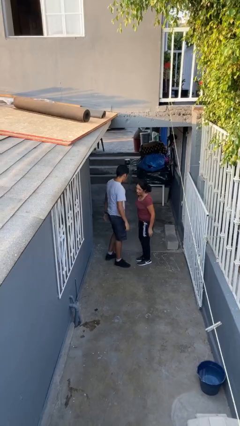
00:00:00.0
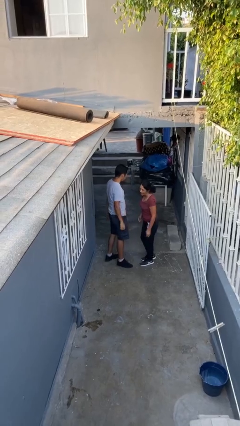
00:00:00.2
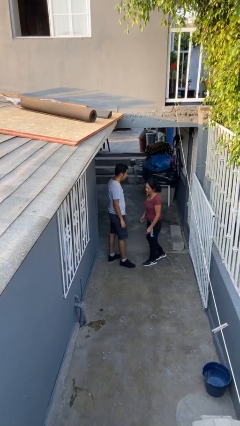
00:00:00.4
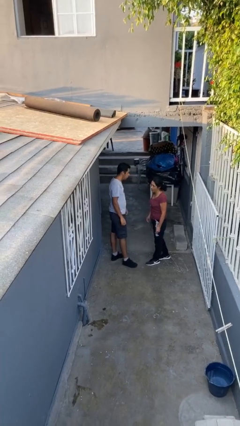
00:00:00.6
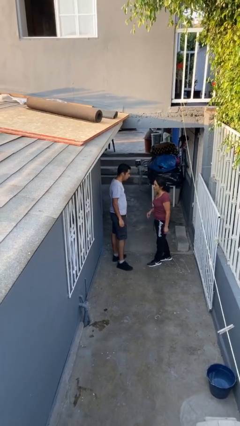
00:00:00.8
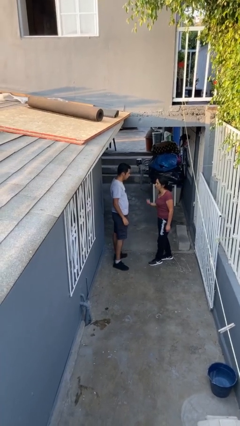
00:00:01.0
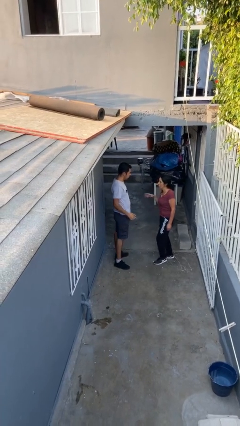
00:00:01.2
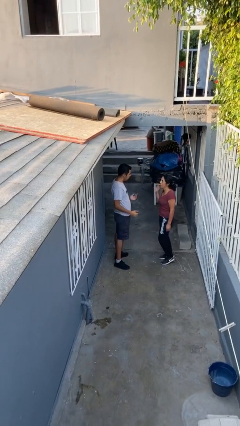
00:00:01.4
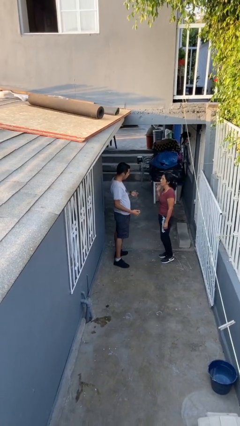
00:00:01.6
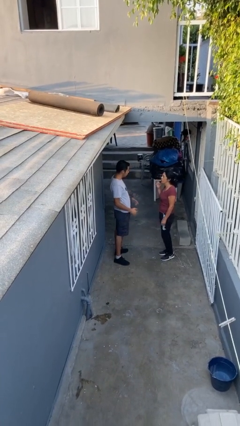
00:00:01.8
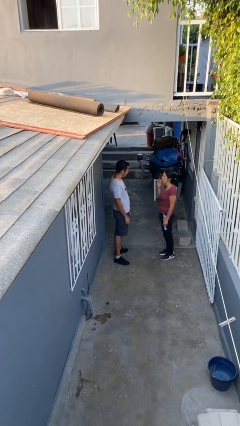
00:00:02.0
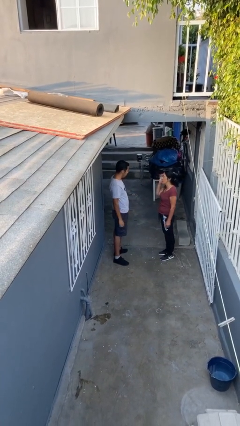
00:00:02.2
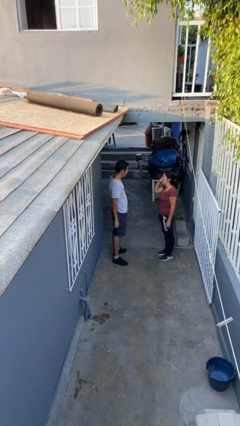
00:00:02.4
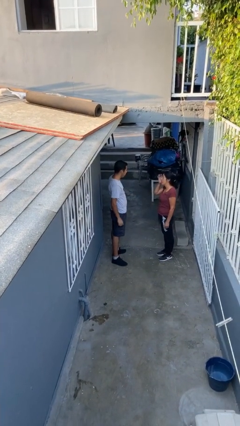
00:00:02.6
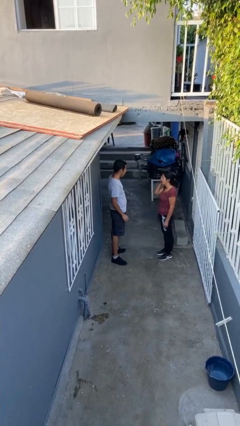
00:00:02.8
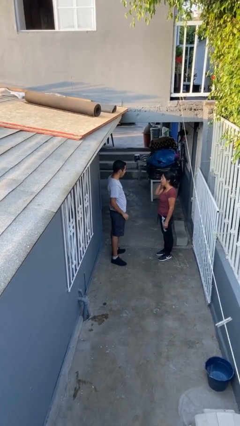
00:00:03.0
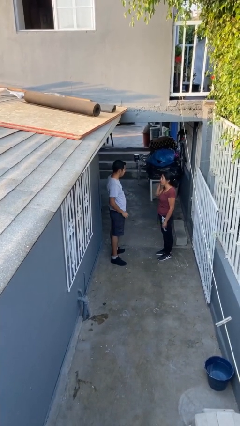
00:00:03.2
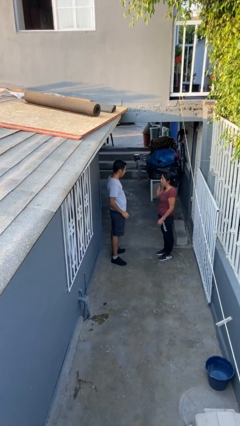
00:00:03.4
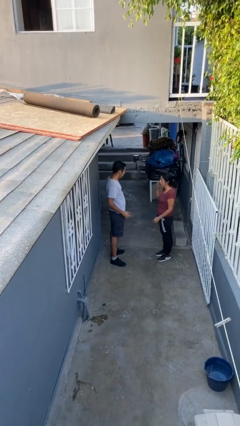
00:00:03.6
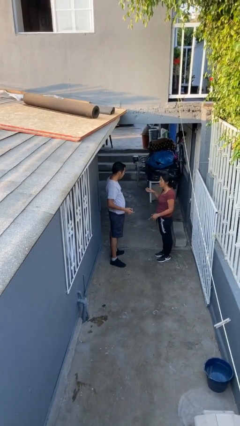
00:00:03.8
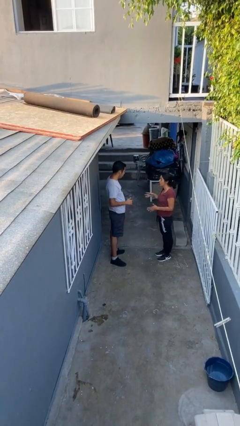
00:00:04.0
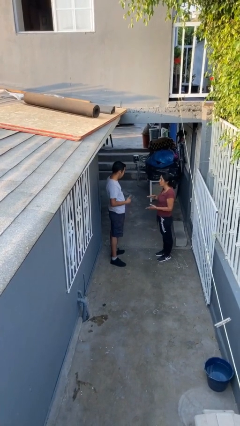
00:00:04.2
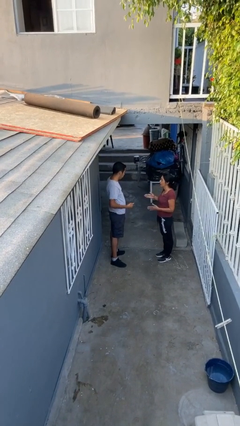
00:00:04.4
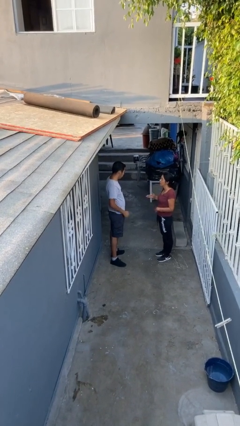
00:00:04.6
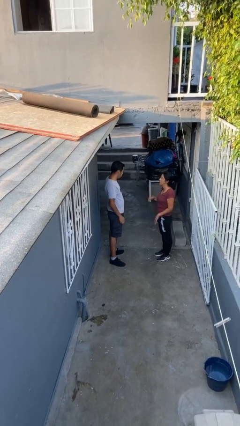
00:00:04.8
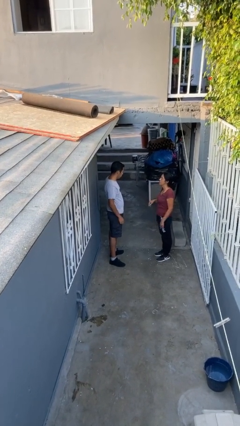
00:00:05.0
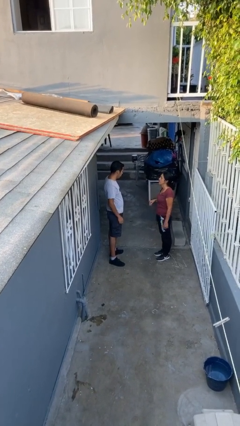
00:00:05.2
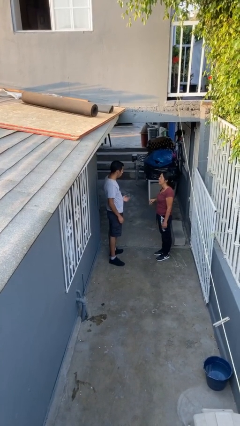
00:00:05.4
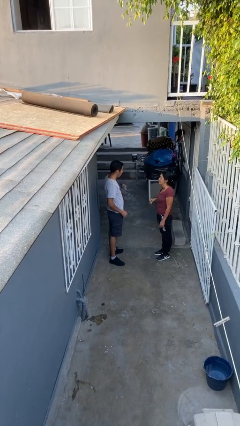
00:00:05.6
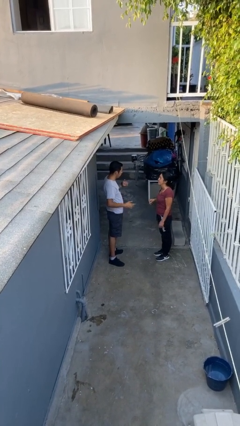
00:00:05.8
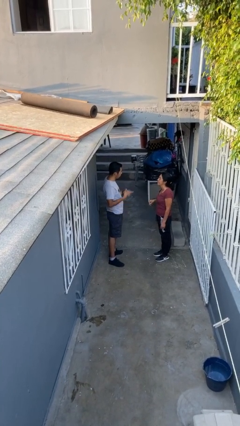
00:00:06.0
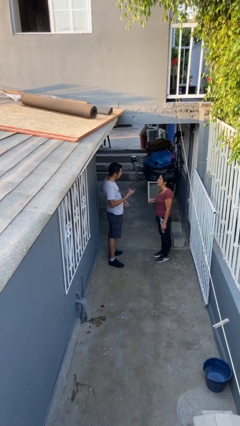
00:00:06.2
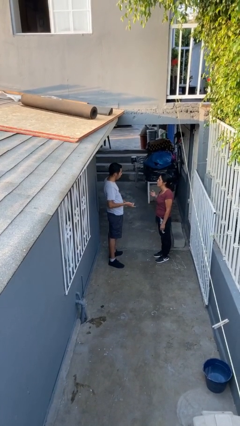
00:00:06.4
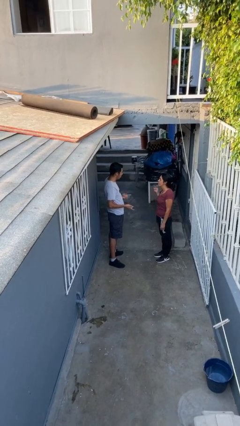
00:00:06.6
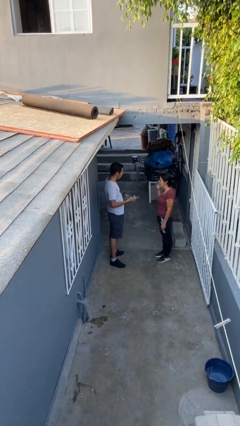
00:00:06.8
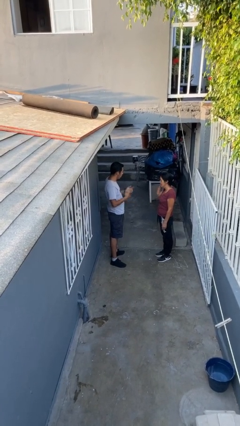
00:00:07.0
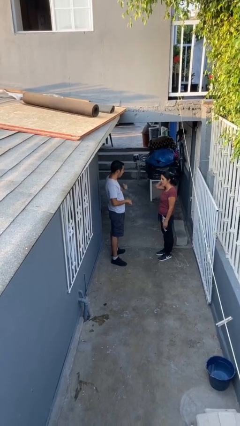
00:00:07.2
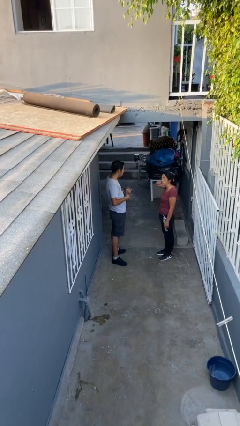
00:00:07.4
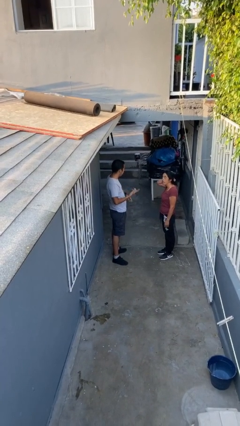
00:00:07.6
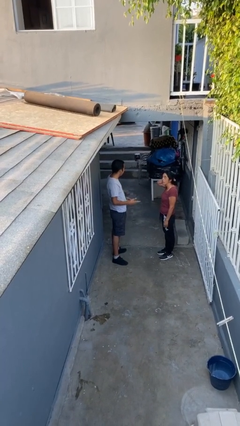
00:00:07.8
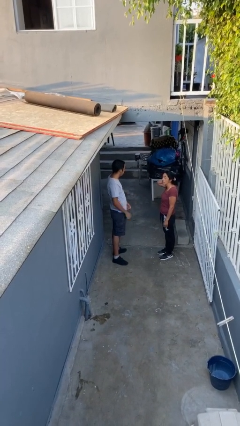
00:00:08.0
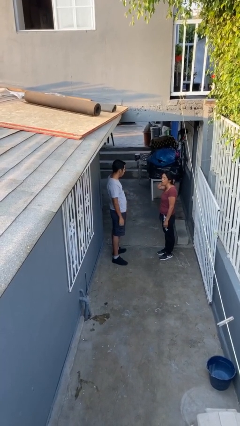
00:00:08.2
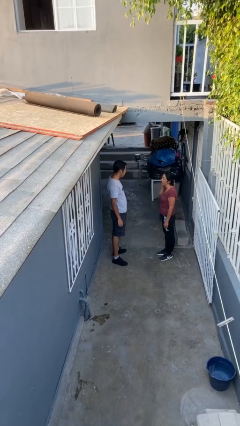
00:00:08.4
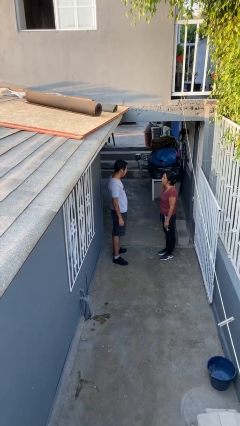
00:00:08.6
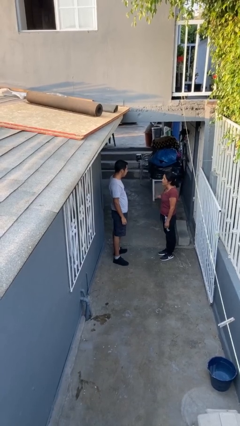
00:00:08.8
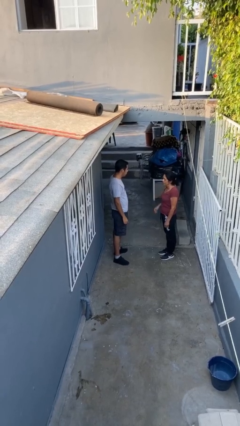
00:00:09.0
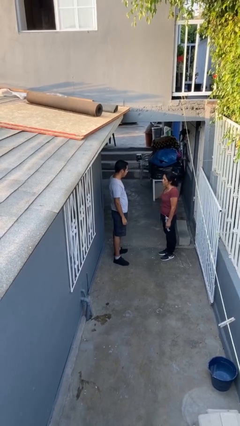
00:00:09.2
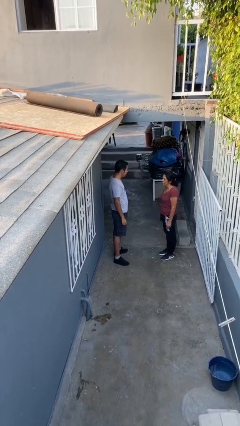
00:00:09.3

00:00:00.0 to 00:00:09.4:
person talks to person

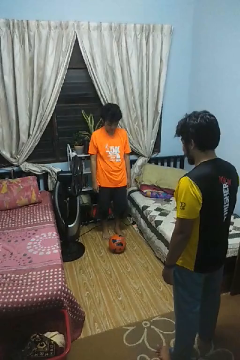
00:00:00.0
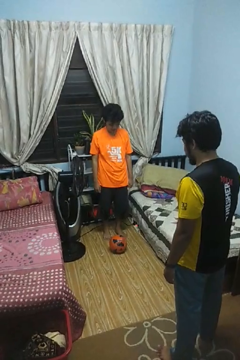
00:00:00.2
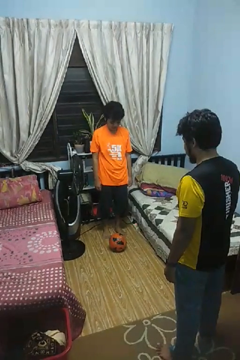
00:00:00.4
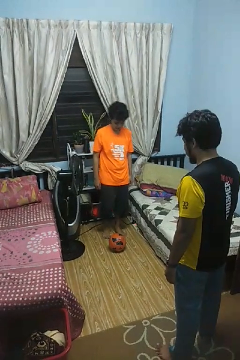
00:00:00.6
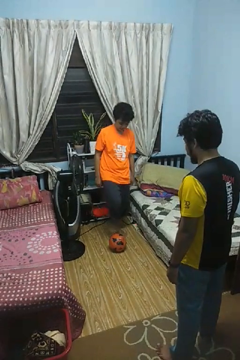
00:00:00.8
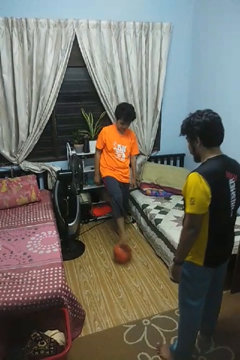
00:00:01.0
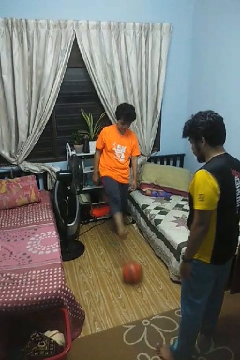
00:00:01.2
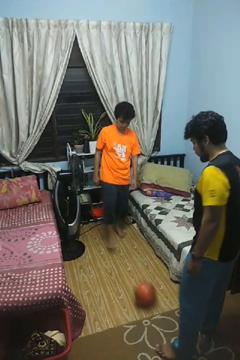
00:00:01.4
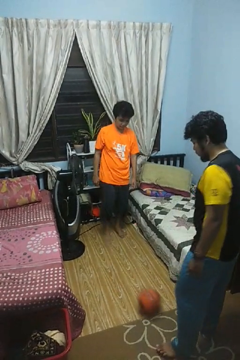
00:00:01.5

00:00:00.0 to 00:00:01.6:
person kicks object to person

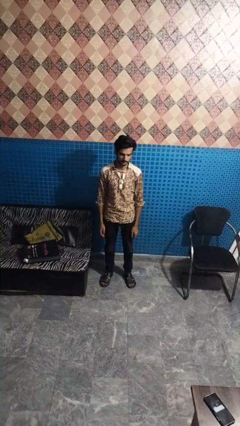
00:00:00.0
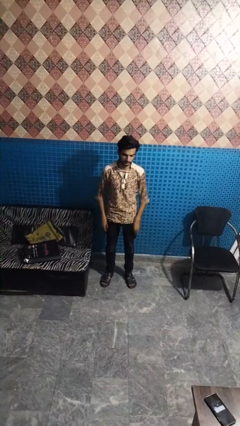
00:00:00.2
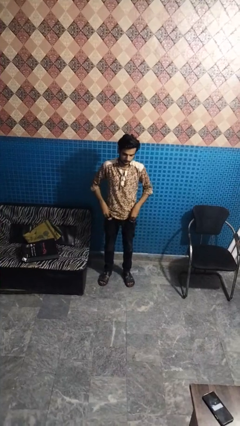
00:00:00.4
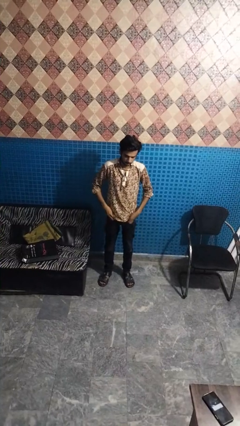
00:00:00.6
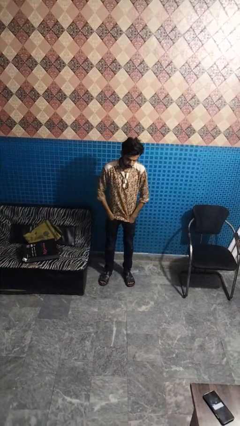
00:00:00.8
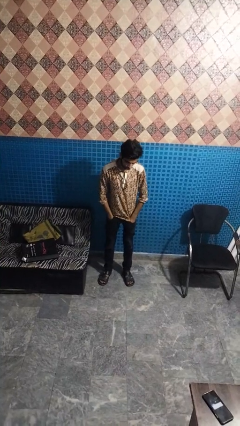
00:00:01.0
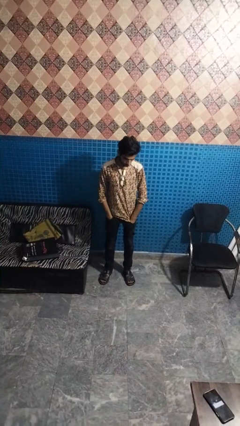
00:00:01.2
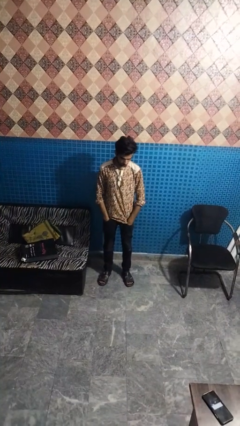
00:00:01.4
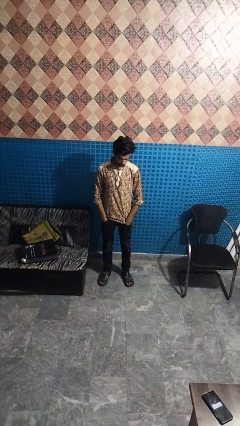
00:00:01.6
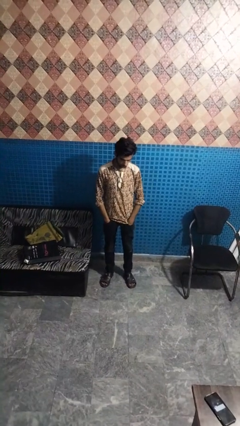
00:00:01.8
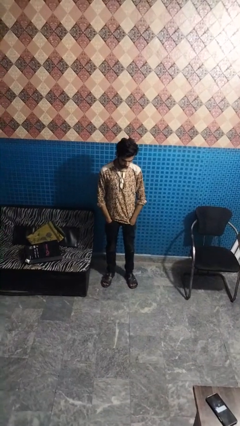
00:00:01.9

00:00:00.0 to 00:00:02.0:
person puts hands in back pockets

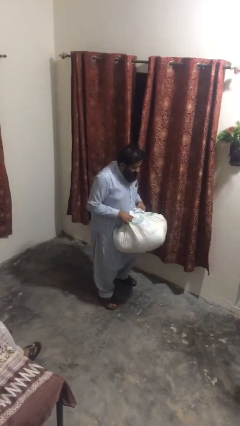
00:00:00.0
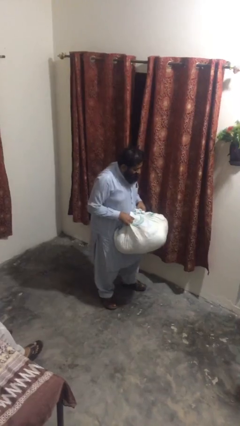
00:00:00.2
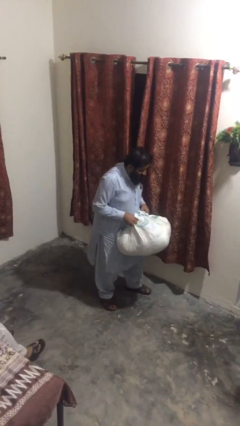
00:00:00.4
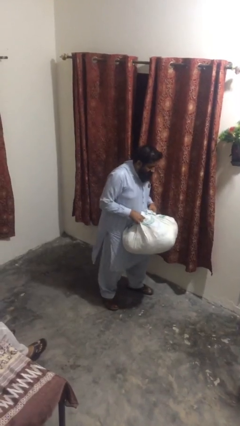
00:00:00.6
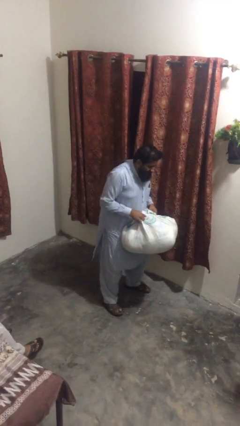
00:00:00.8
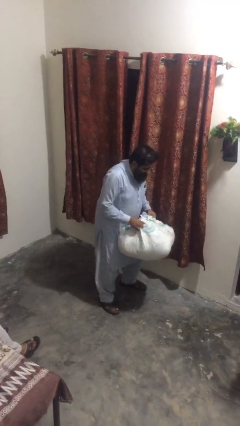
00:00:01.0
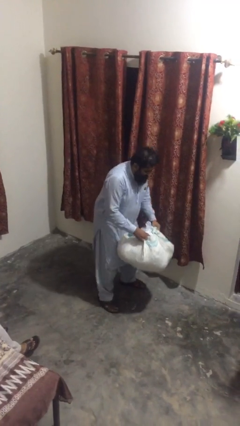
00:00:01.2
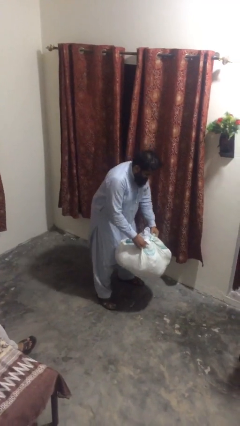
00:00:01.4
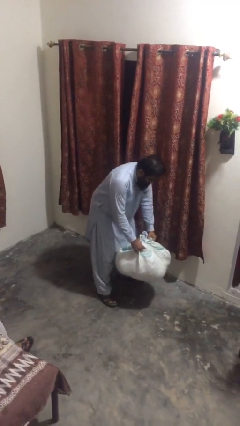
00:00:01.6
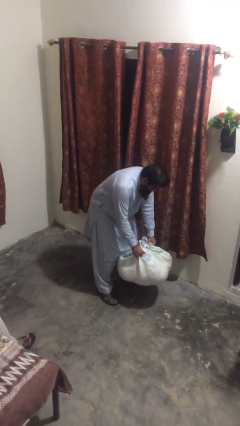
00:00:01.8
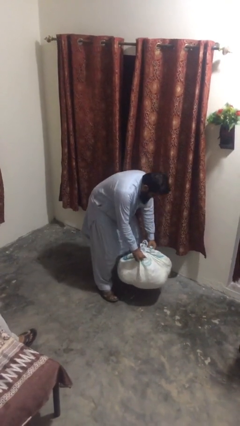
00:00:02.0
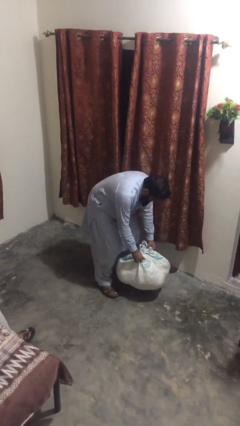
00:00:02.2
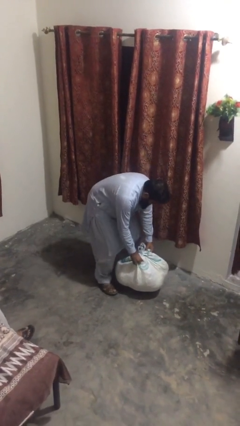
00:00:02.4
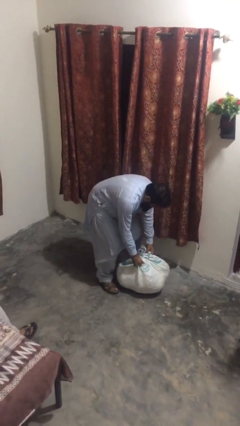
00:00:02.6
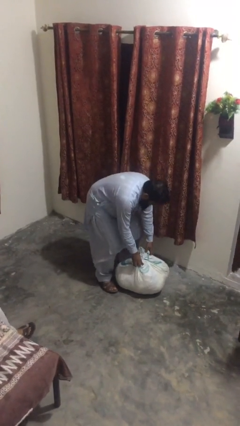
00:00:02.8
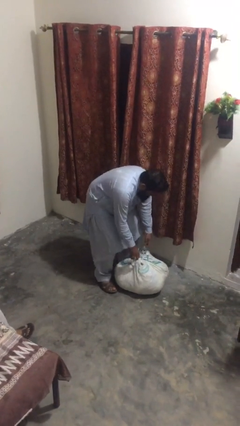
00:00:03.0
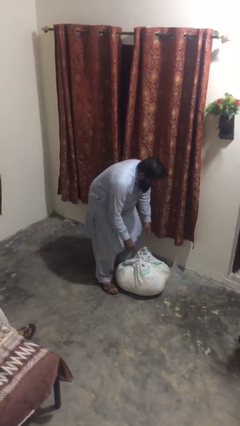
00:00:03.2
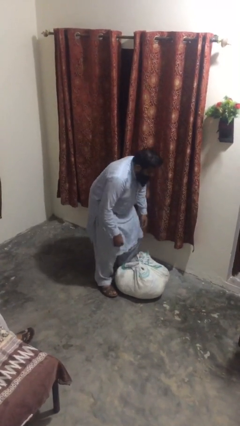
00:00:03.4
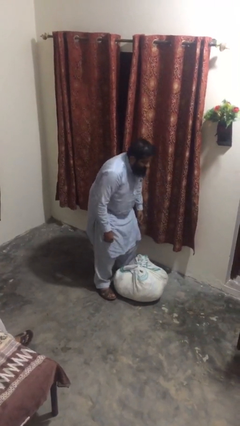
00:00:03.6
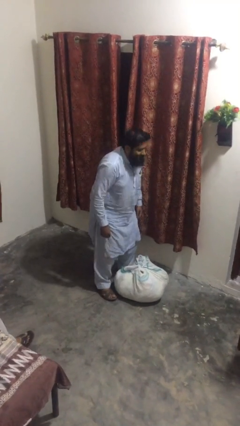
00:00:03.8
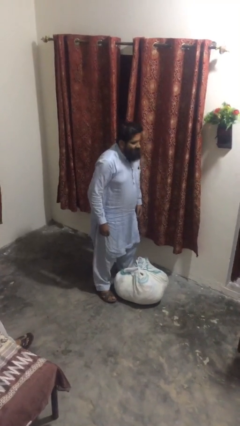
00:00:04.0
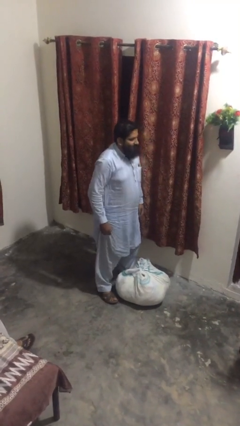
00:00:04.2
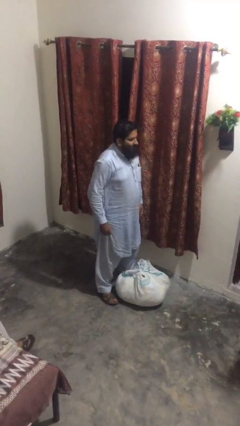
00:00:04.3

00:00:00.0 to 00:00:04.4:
person puts down object on floor

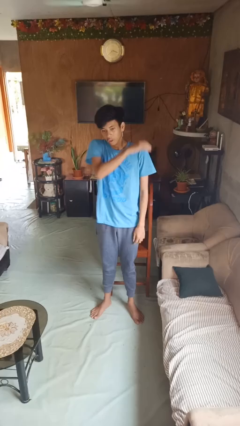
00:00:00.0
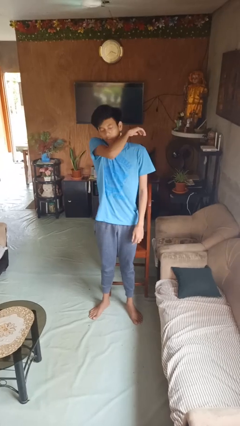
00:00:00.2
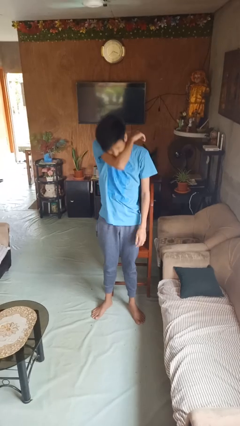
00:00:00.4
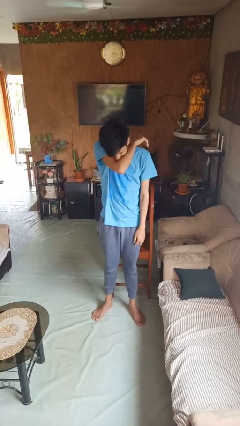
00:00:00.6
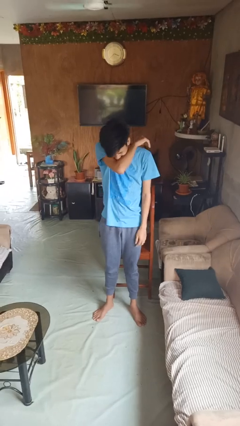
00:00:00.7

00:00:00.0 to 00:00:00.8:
person sneezes into arm
